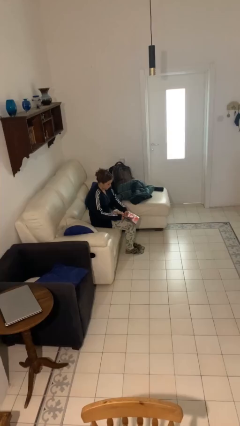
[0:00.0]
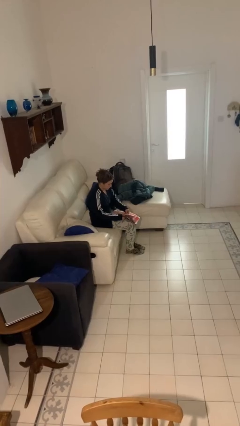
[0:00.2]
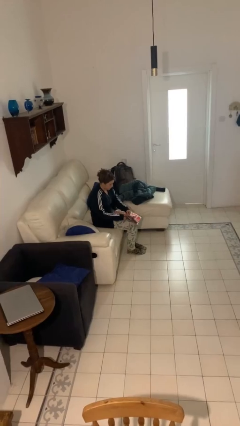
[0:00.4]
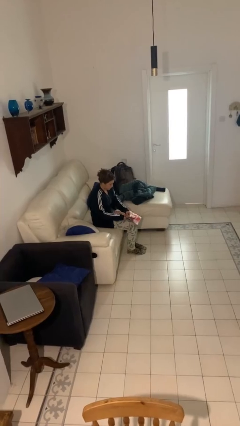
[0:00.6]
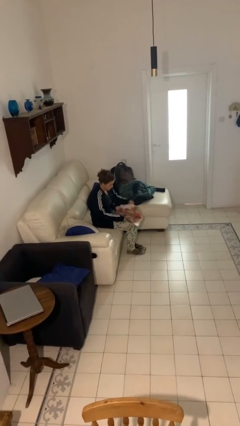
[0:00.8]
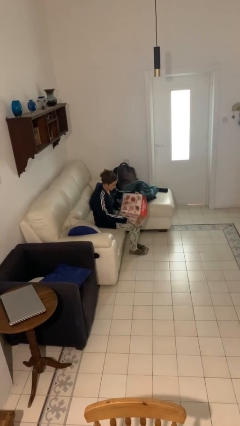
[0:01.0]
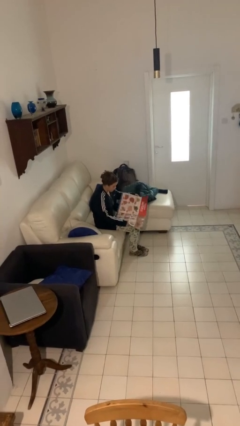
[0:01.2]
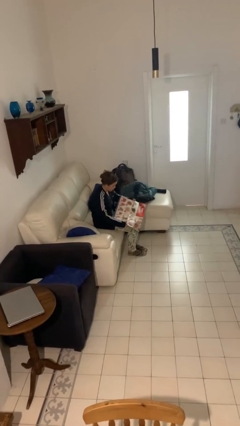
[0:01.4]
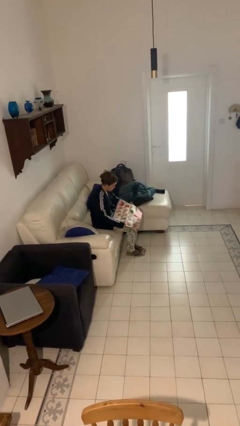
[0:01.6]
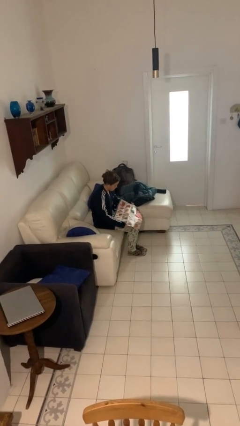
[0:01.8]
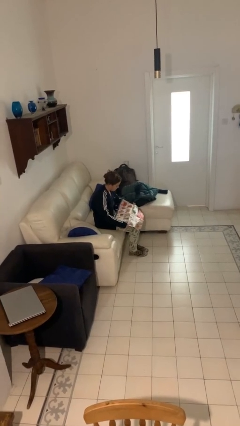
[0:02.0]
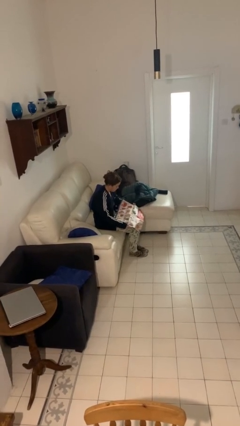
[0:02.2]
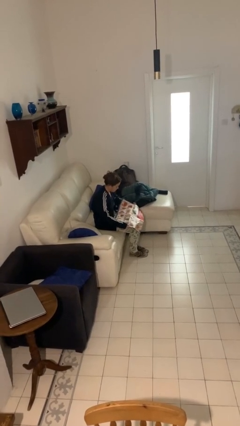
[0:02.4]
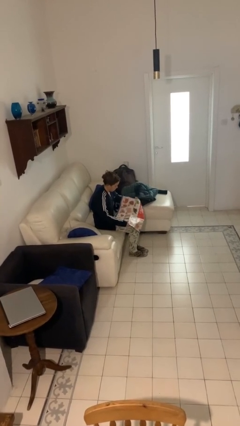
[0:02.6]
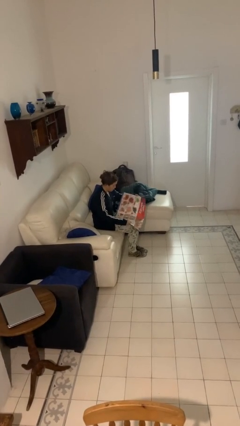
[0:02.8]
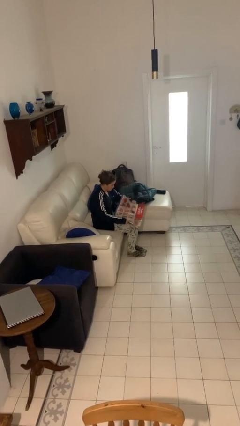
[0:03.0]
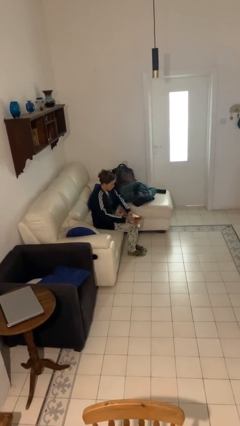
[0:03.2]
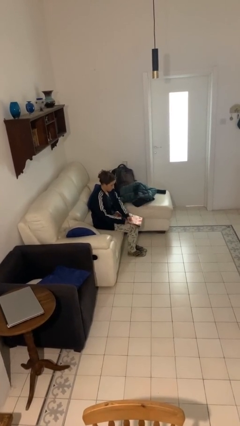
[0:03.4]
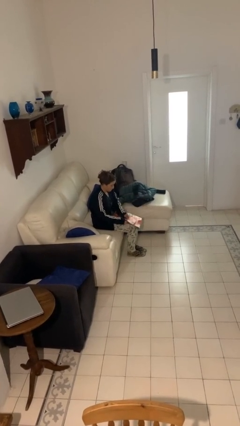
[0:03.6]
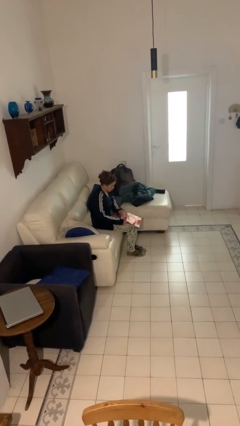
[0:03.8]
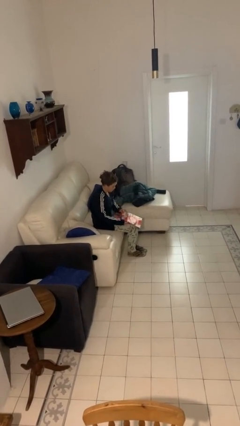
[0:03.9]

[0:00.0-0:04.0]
person reads newspaper

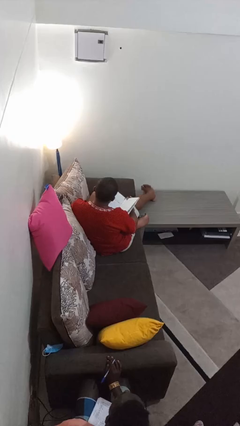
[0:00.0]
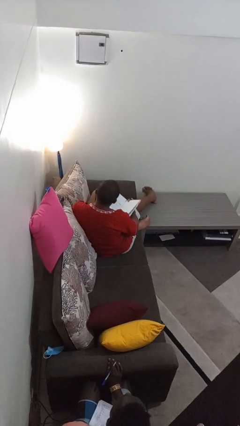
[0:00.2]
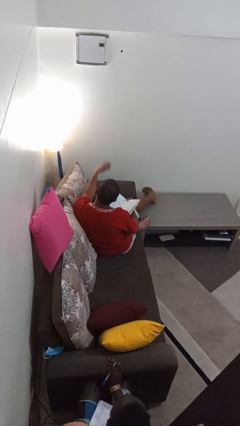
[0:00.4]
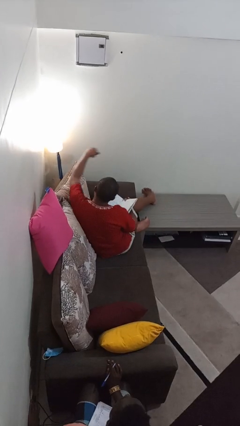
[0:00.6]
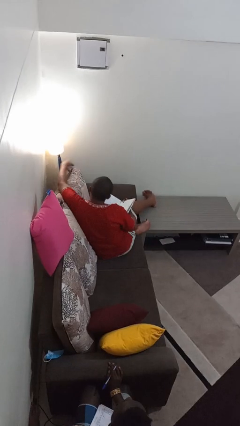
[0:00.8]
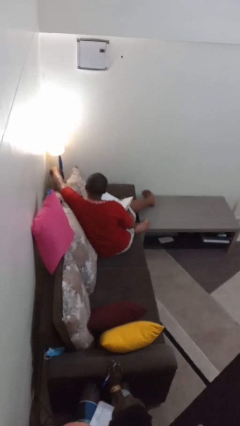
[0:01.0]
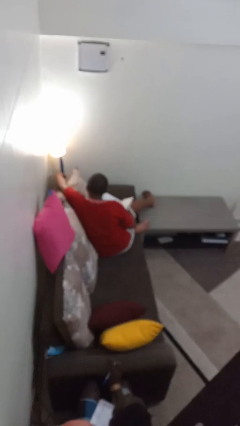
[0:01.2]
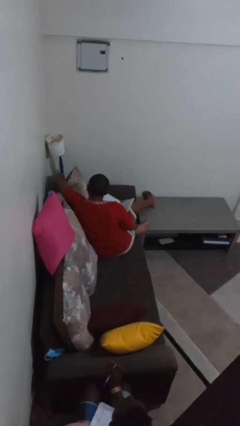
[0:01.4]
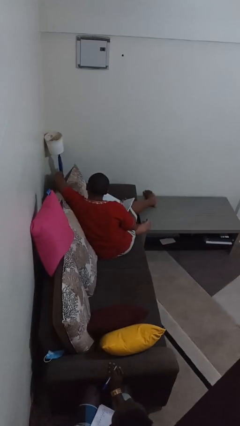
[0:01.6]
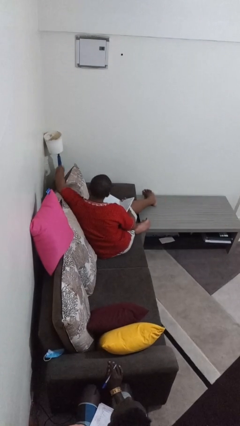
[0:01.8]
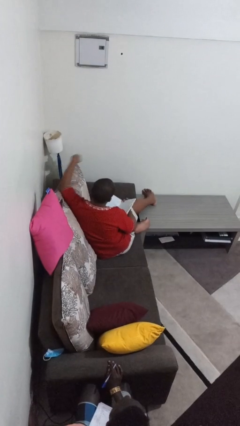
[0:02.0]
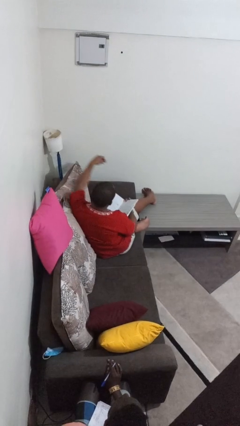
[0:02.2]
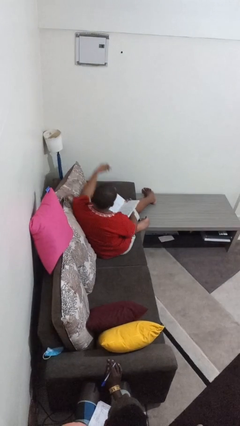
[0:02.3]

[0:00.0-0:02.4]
person turns off lamp

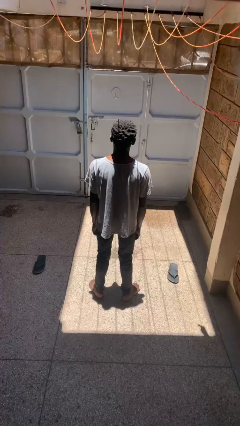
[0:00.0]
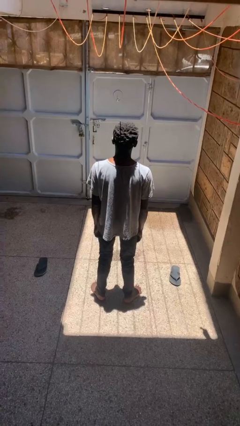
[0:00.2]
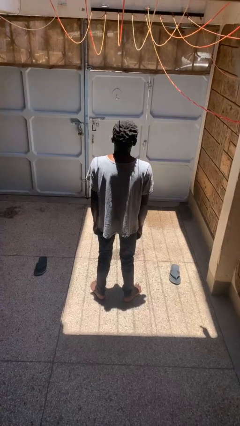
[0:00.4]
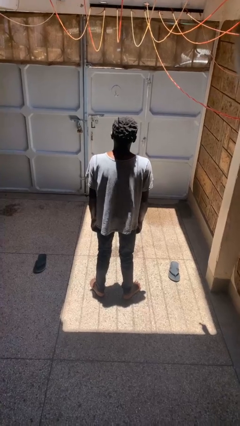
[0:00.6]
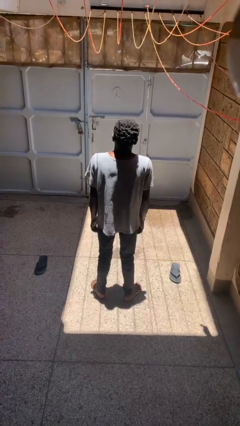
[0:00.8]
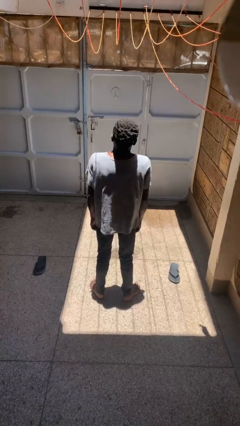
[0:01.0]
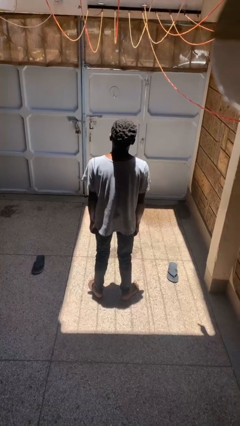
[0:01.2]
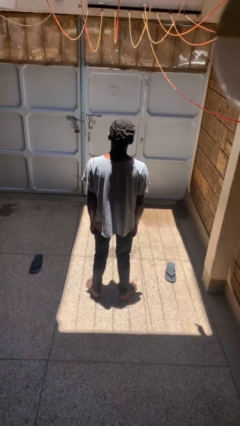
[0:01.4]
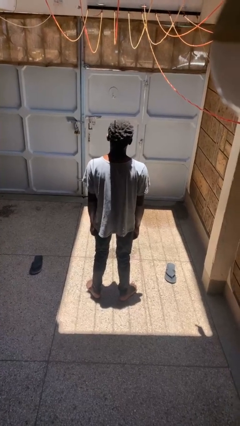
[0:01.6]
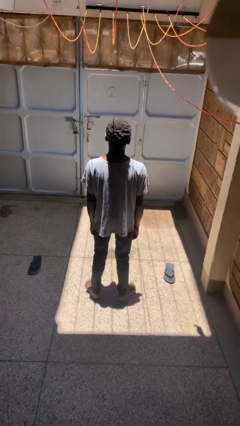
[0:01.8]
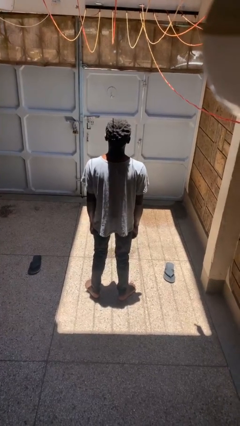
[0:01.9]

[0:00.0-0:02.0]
person shrugs

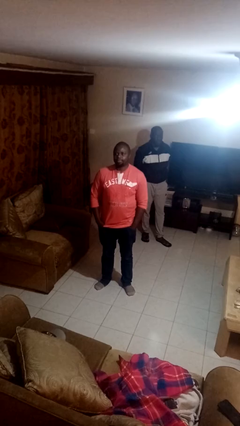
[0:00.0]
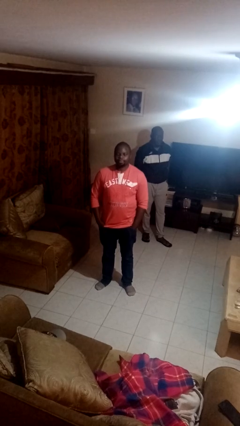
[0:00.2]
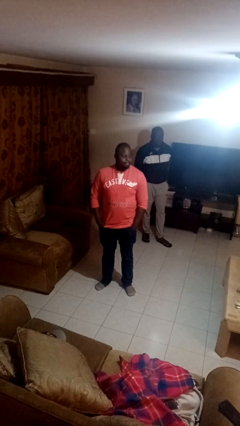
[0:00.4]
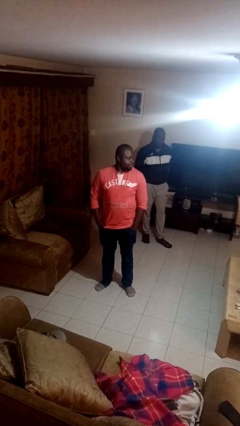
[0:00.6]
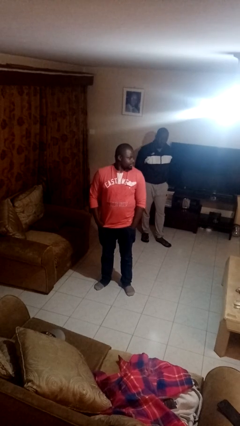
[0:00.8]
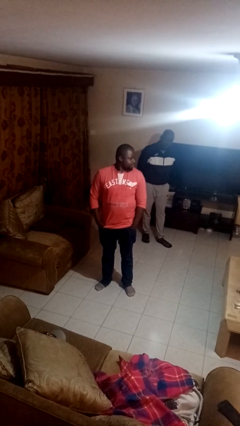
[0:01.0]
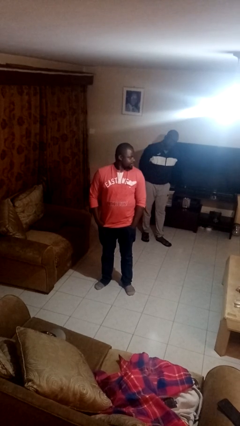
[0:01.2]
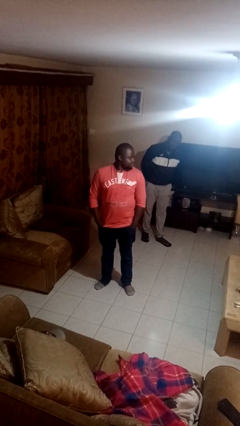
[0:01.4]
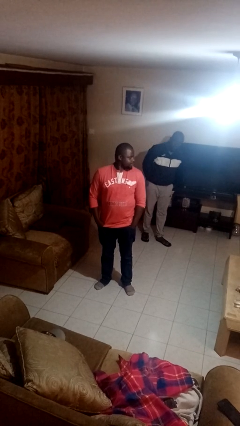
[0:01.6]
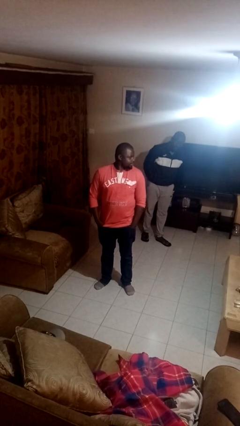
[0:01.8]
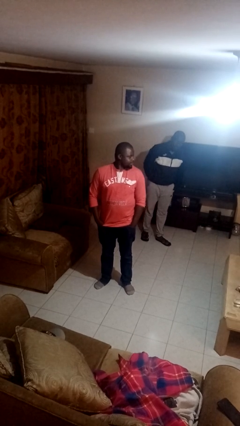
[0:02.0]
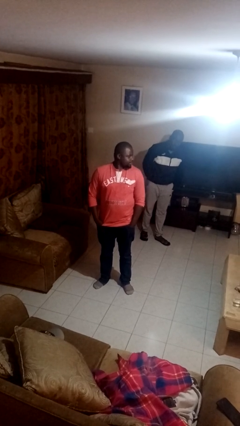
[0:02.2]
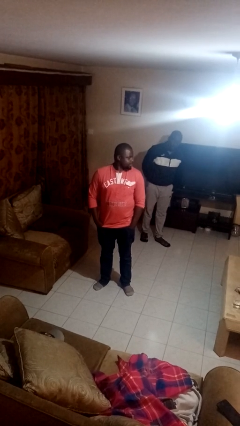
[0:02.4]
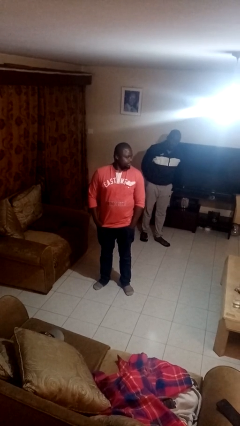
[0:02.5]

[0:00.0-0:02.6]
person looks over shoulder

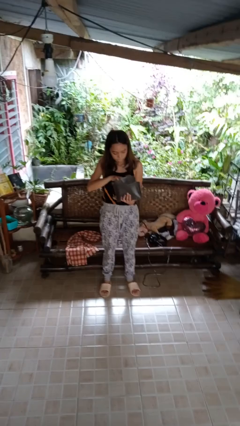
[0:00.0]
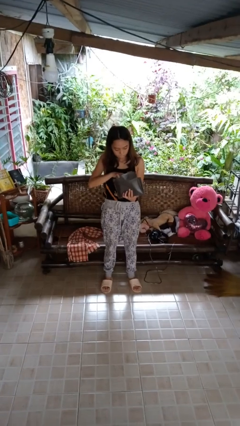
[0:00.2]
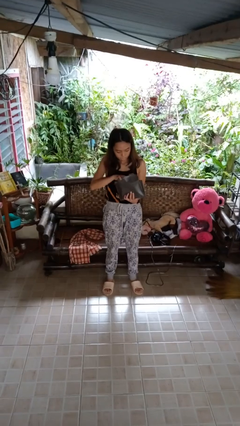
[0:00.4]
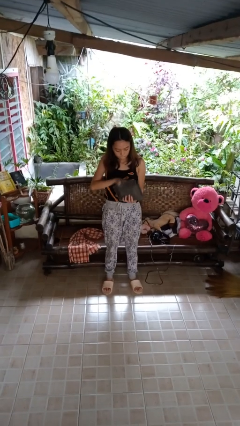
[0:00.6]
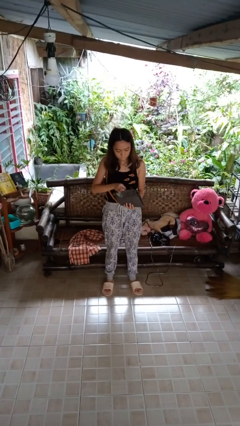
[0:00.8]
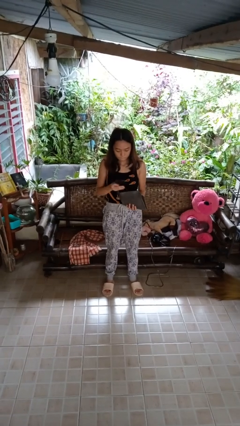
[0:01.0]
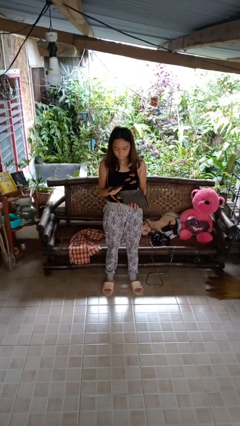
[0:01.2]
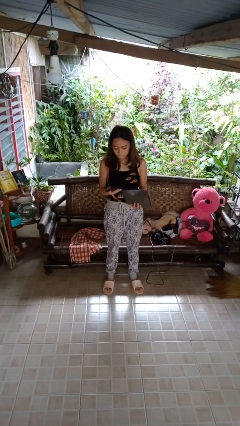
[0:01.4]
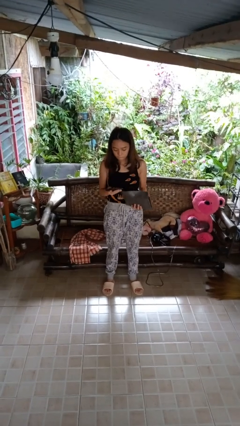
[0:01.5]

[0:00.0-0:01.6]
person takes object from purse

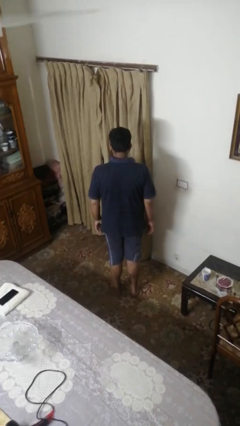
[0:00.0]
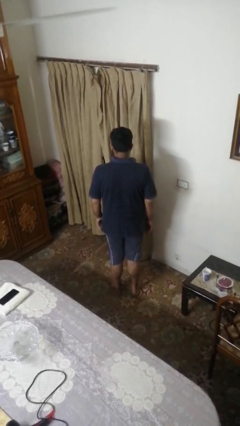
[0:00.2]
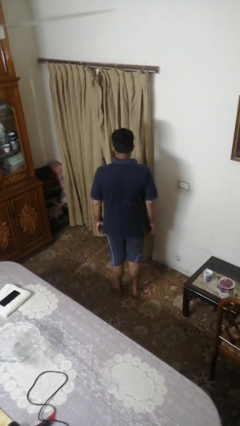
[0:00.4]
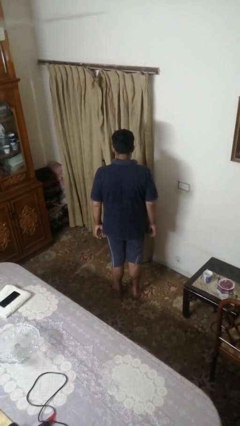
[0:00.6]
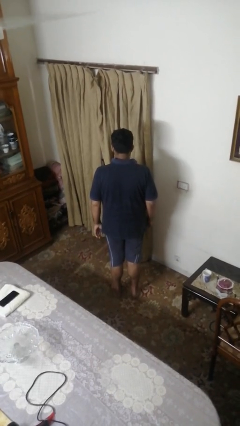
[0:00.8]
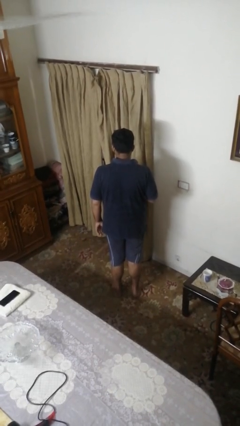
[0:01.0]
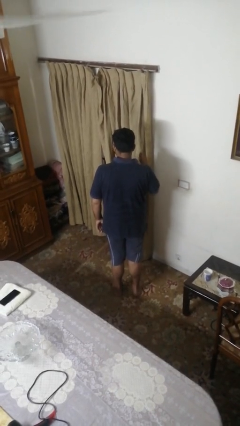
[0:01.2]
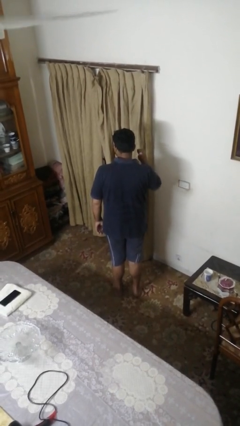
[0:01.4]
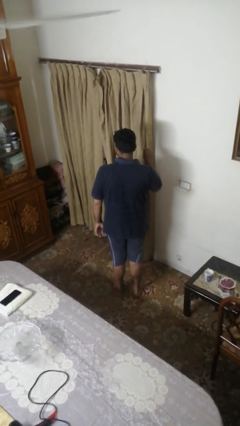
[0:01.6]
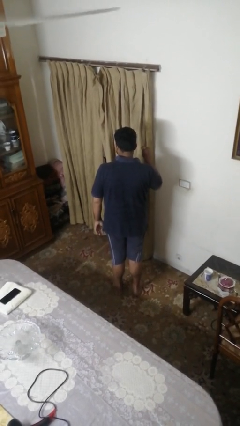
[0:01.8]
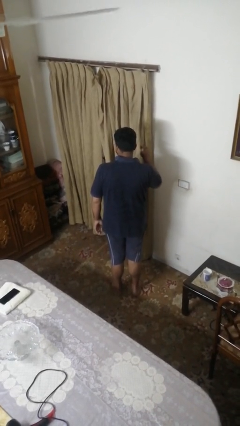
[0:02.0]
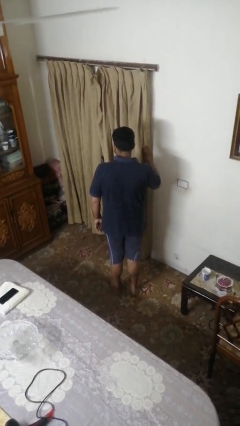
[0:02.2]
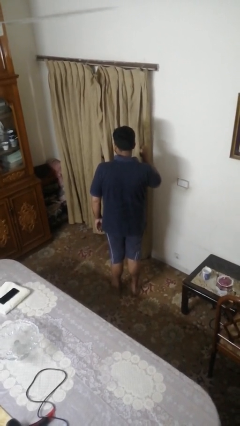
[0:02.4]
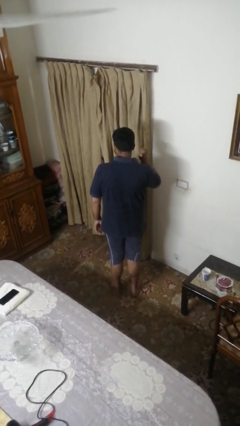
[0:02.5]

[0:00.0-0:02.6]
person gestures behind me

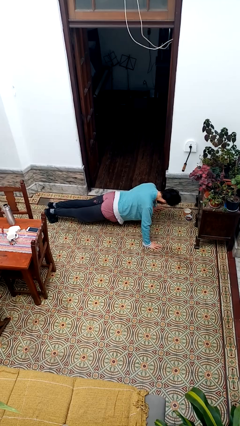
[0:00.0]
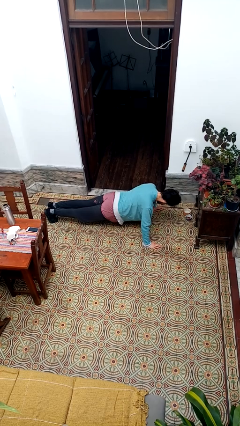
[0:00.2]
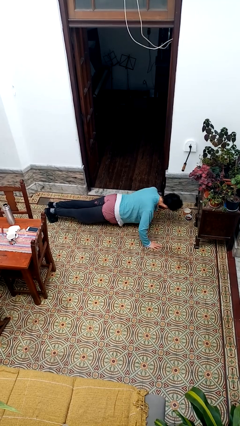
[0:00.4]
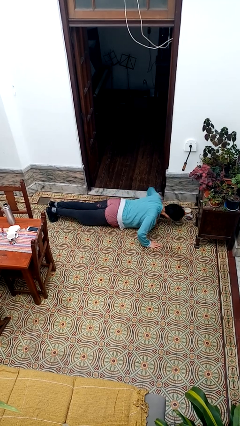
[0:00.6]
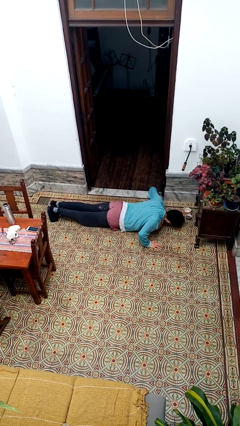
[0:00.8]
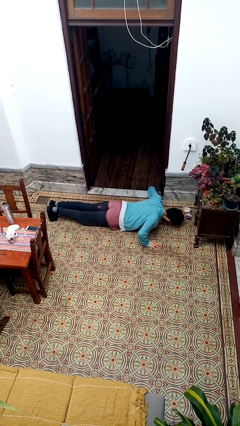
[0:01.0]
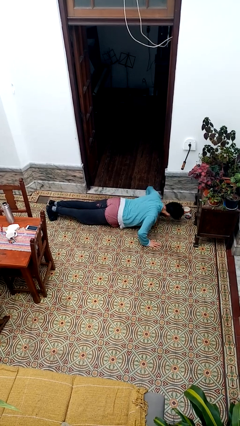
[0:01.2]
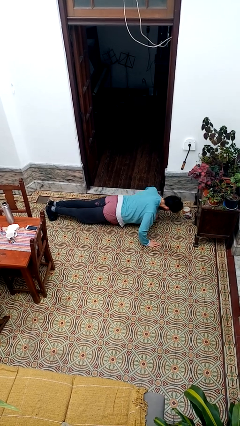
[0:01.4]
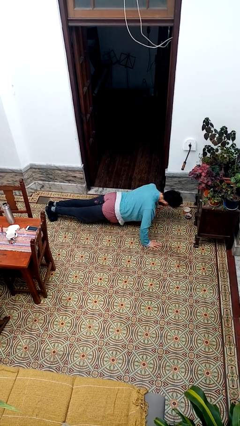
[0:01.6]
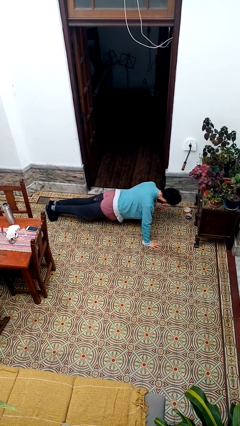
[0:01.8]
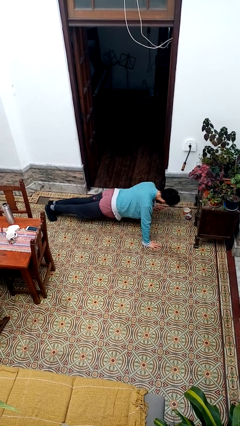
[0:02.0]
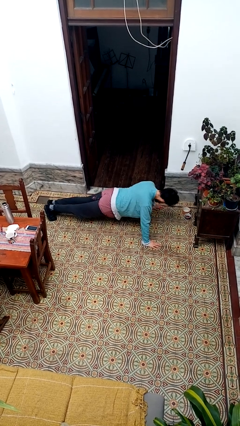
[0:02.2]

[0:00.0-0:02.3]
person exercises with pushup
